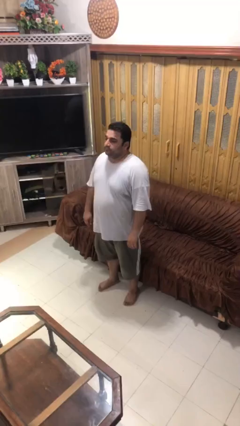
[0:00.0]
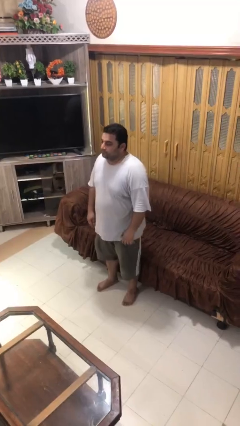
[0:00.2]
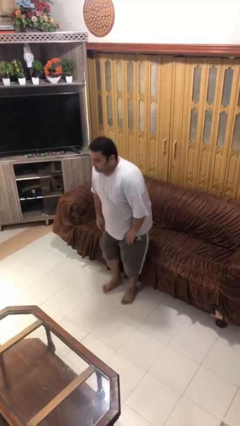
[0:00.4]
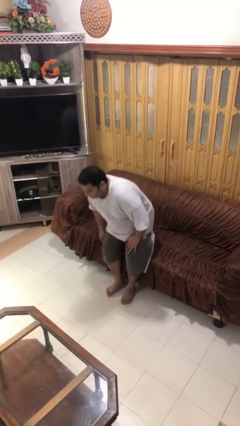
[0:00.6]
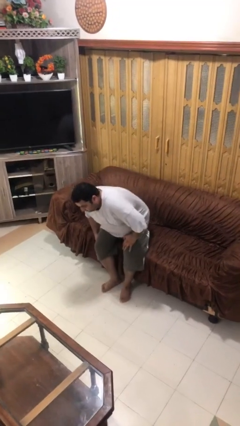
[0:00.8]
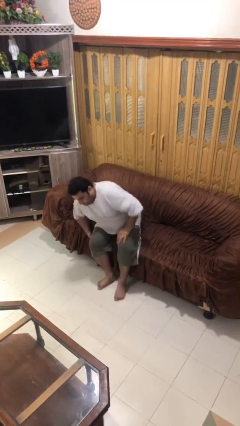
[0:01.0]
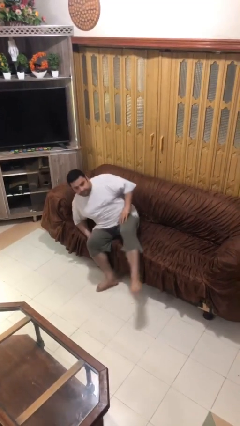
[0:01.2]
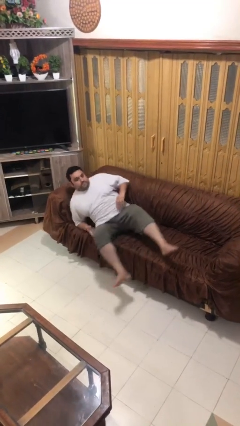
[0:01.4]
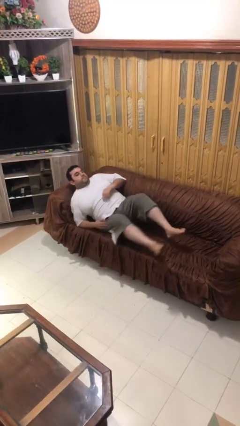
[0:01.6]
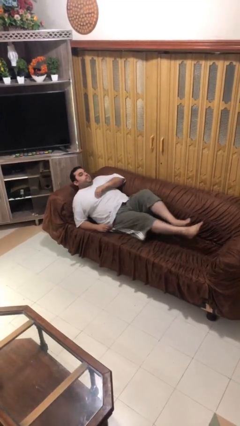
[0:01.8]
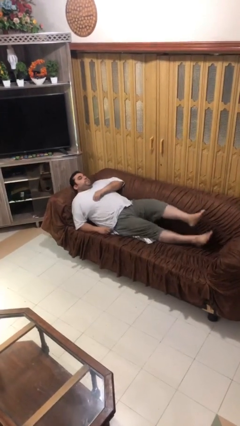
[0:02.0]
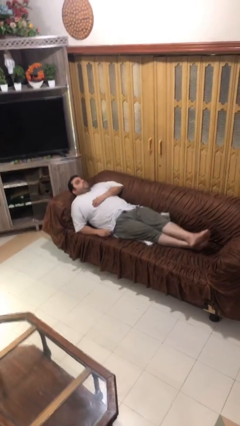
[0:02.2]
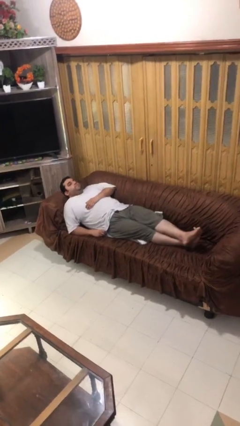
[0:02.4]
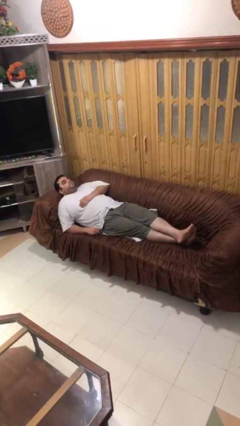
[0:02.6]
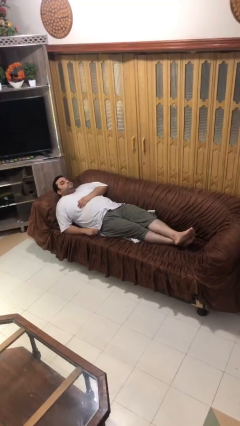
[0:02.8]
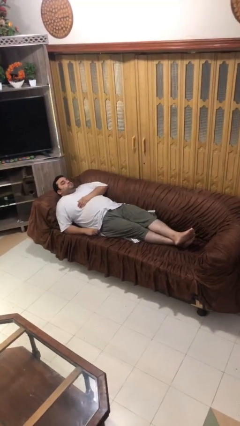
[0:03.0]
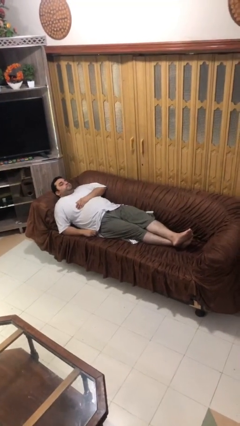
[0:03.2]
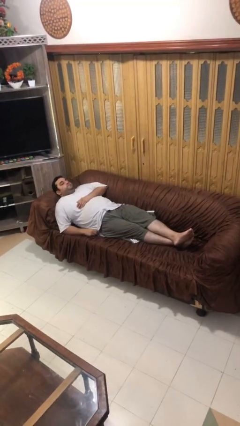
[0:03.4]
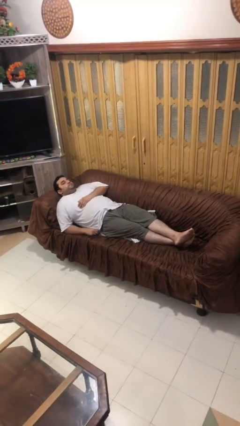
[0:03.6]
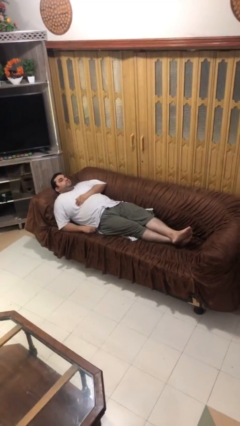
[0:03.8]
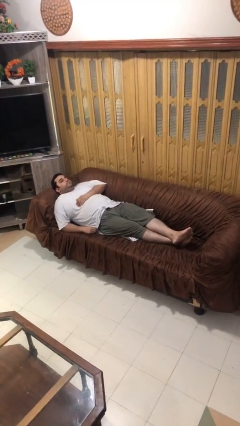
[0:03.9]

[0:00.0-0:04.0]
person lies down on couch

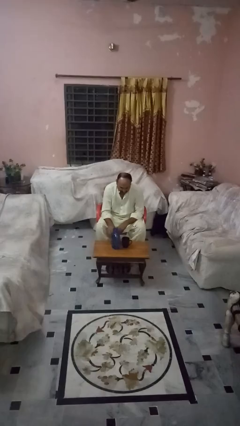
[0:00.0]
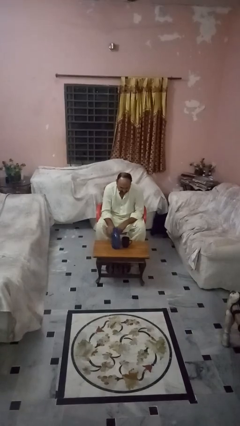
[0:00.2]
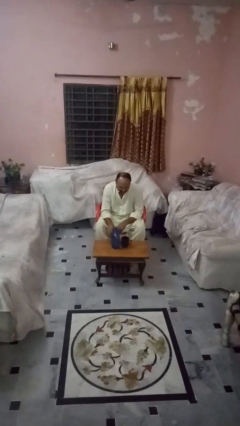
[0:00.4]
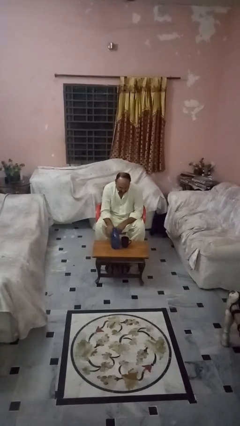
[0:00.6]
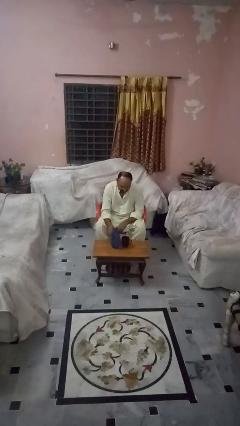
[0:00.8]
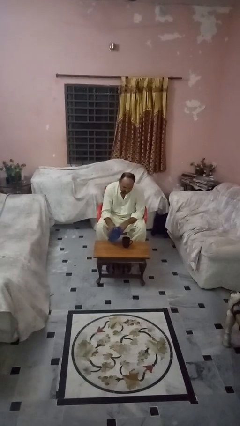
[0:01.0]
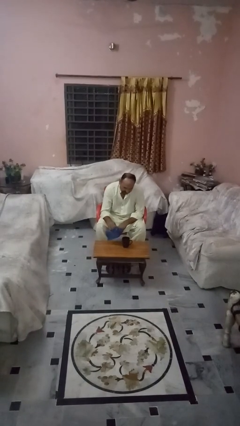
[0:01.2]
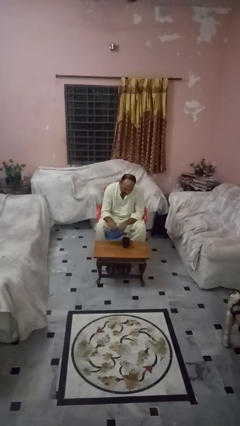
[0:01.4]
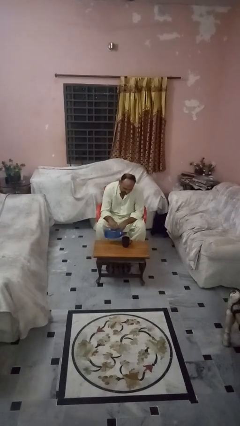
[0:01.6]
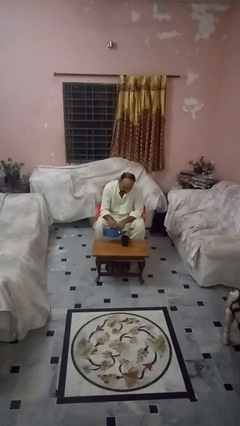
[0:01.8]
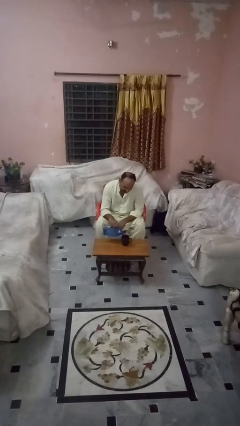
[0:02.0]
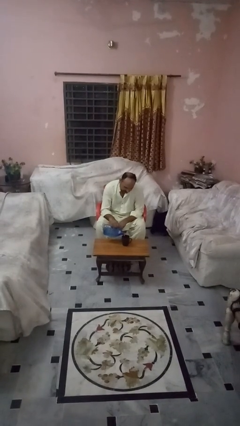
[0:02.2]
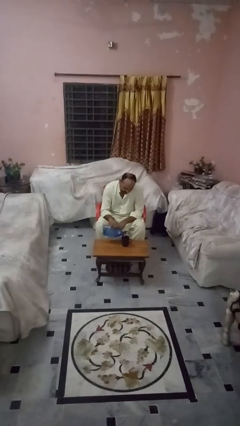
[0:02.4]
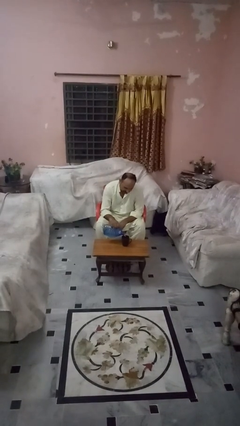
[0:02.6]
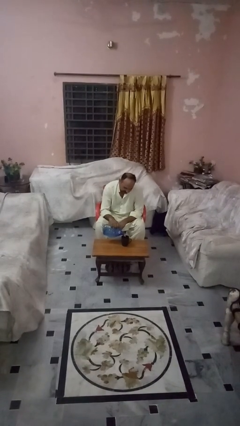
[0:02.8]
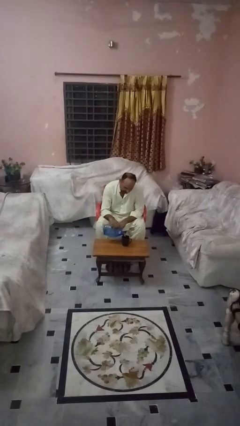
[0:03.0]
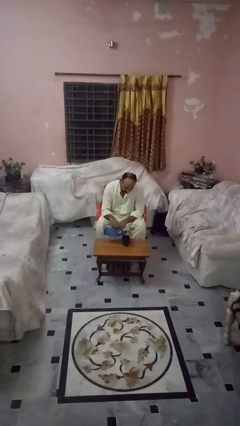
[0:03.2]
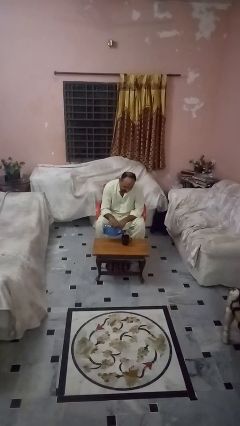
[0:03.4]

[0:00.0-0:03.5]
person pours liquid into cup

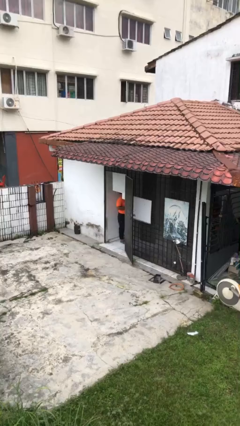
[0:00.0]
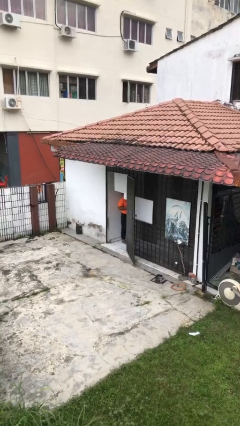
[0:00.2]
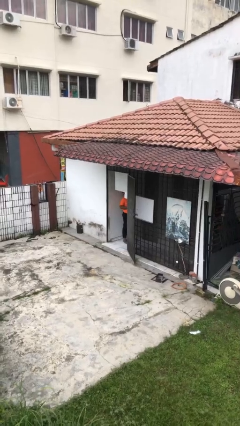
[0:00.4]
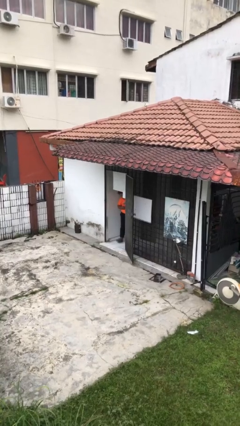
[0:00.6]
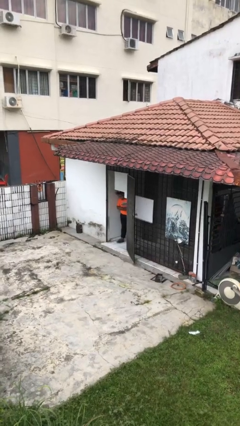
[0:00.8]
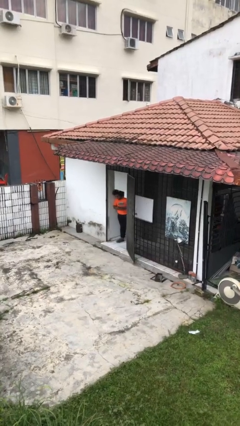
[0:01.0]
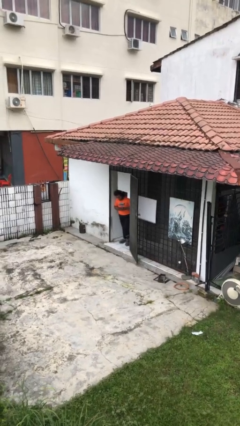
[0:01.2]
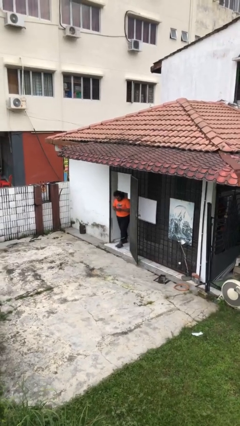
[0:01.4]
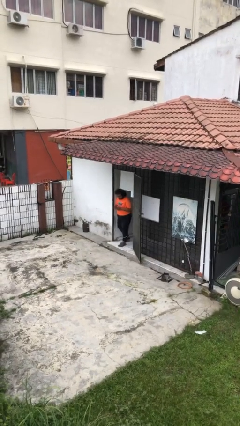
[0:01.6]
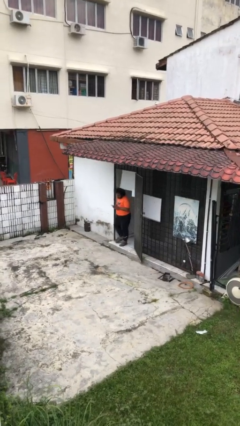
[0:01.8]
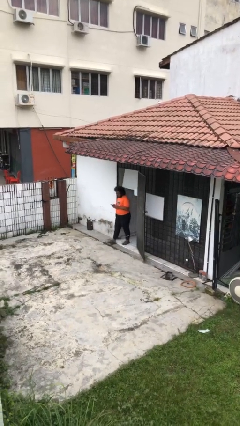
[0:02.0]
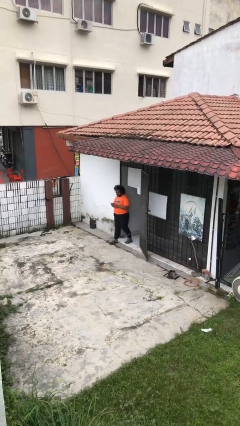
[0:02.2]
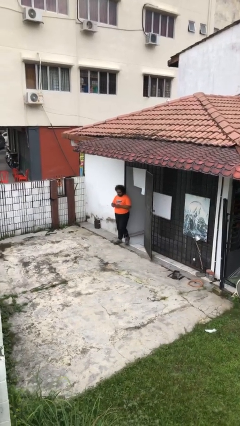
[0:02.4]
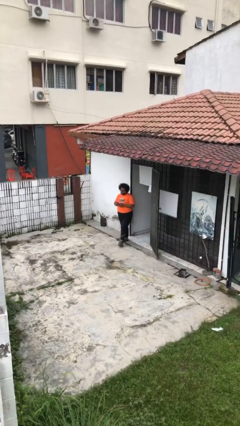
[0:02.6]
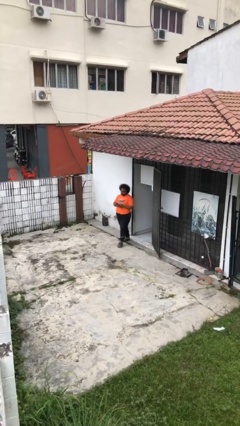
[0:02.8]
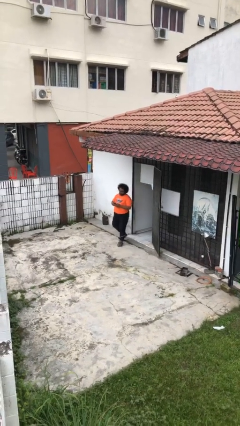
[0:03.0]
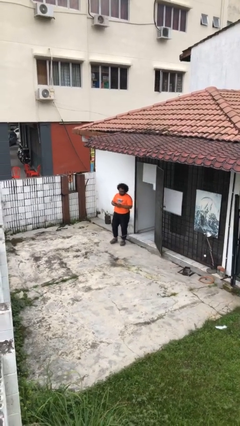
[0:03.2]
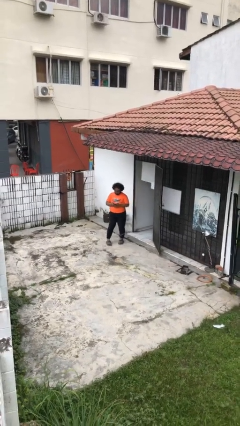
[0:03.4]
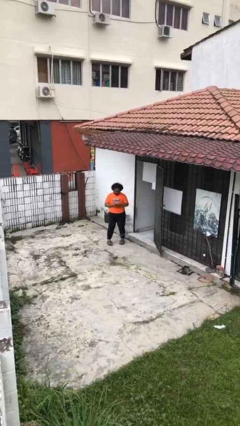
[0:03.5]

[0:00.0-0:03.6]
person enters scene through structure

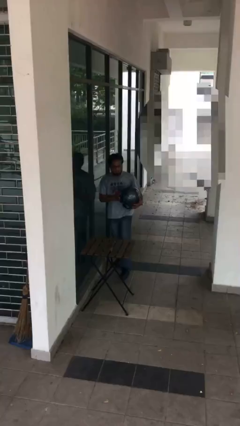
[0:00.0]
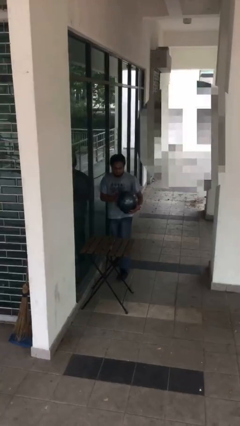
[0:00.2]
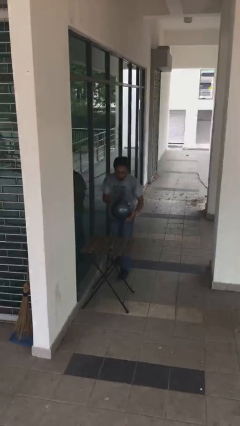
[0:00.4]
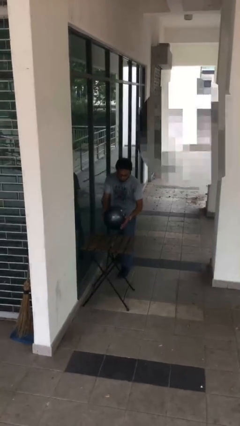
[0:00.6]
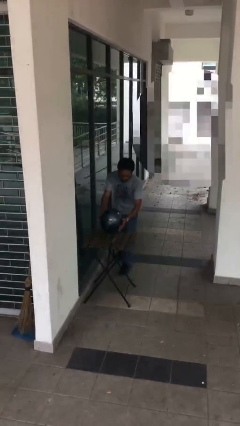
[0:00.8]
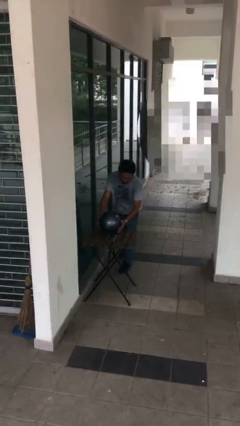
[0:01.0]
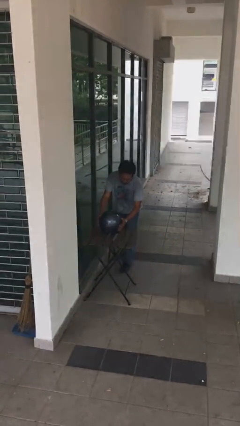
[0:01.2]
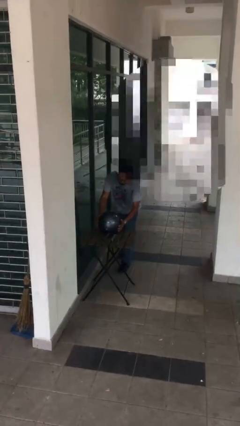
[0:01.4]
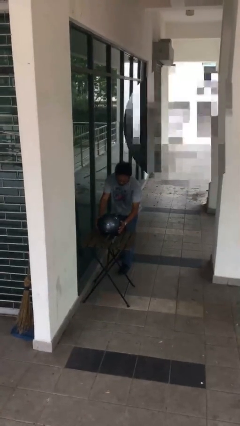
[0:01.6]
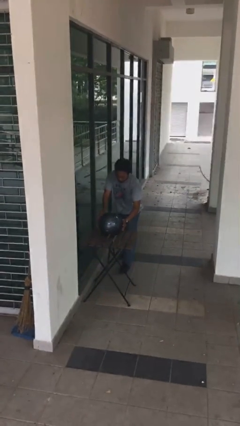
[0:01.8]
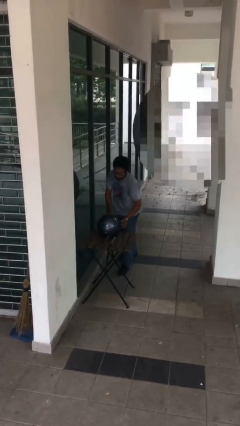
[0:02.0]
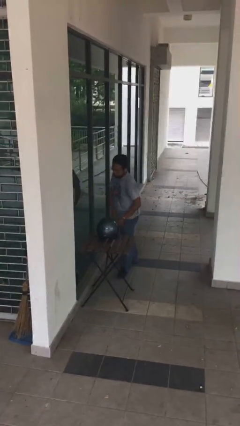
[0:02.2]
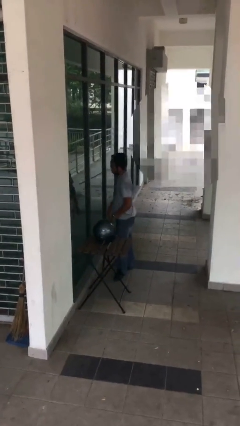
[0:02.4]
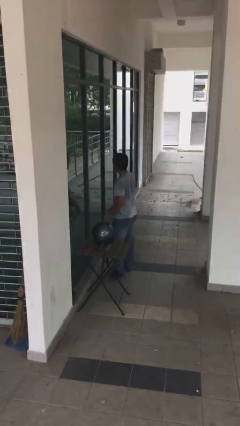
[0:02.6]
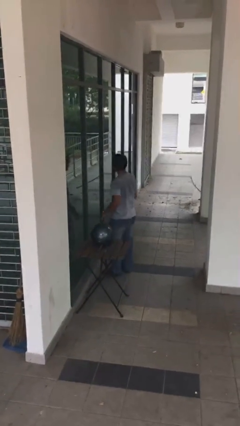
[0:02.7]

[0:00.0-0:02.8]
person puts down object on table

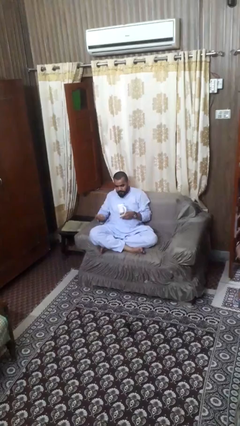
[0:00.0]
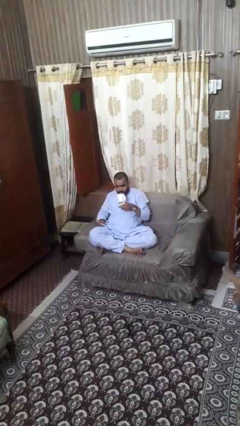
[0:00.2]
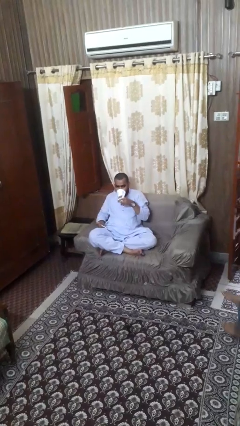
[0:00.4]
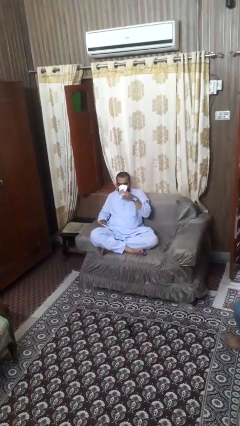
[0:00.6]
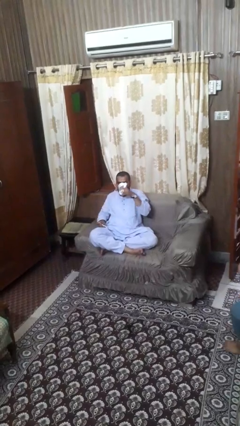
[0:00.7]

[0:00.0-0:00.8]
person drinks from mug

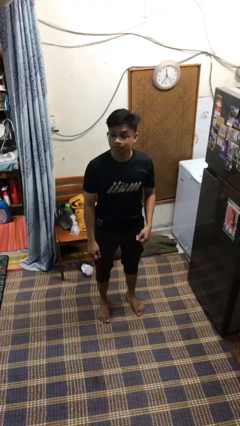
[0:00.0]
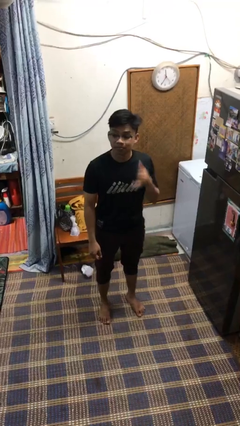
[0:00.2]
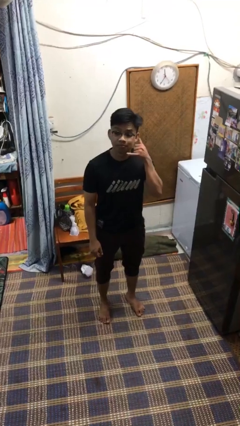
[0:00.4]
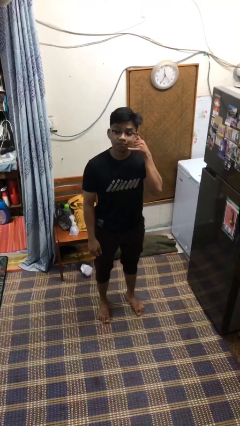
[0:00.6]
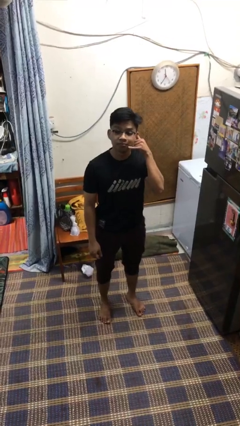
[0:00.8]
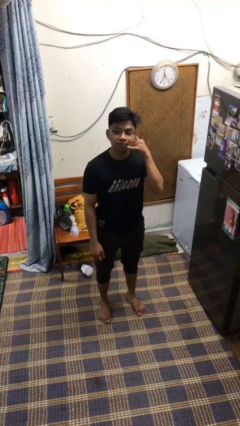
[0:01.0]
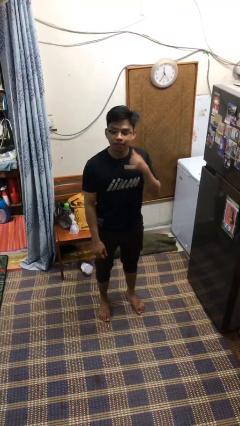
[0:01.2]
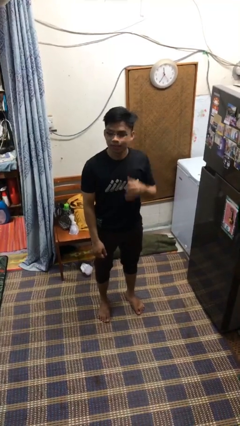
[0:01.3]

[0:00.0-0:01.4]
person gestures call me

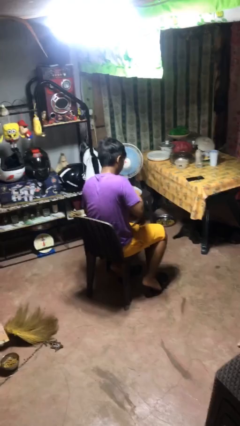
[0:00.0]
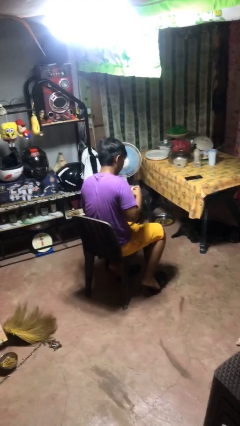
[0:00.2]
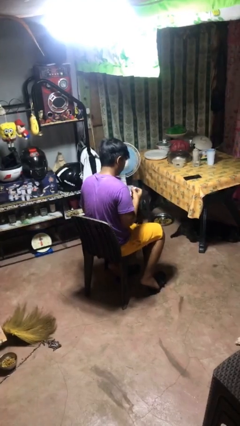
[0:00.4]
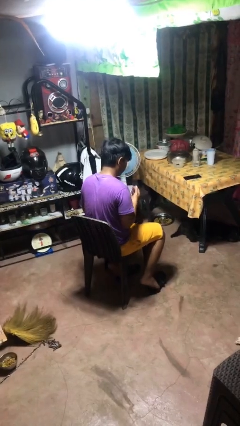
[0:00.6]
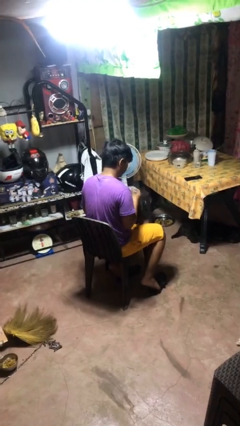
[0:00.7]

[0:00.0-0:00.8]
person takes object from purse

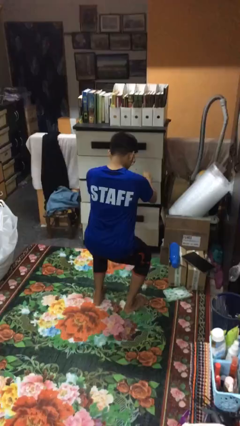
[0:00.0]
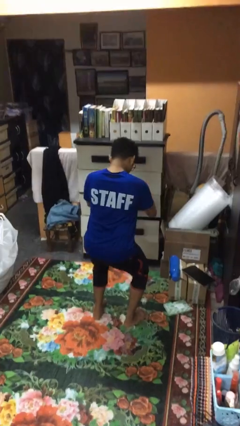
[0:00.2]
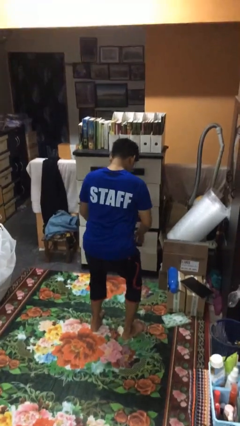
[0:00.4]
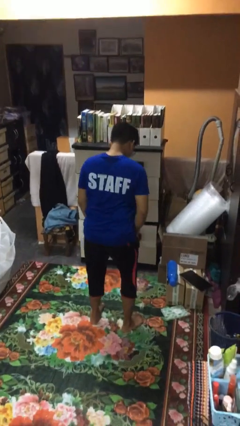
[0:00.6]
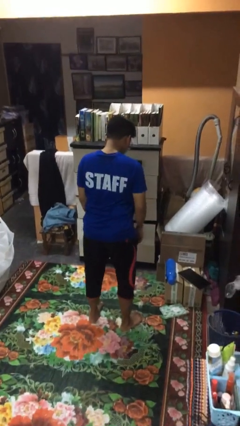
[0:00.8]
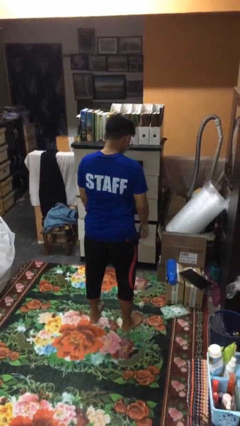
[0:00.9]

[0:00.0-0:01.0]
person stands up
